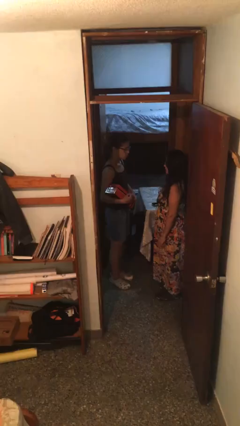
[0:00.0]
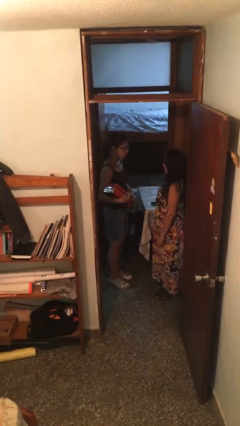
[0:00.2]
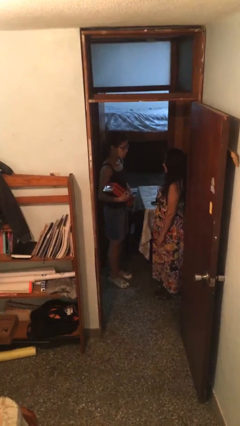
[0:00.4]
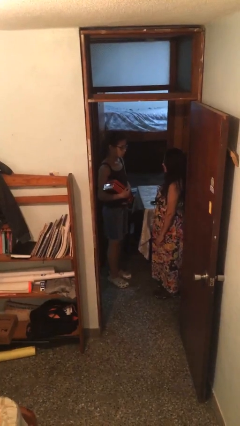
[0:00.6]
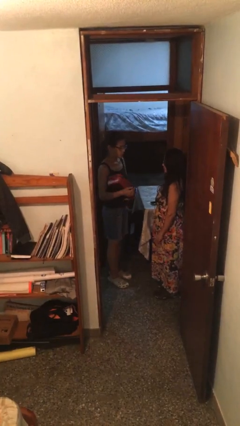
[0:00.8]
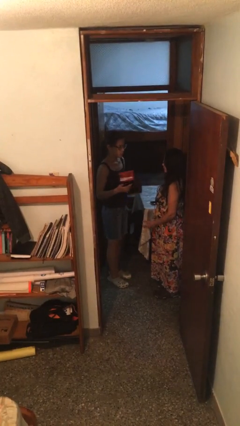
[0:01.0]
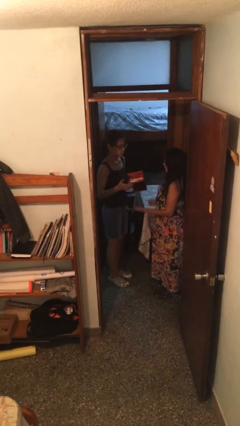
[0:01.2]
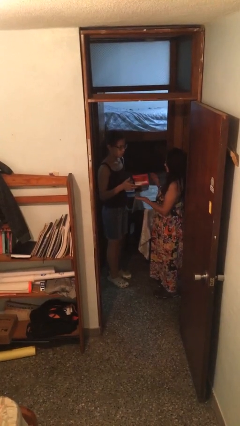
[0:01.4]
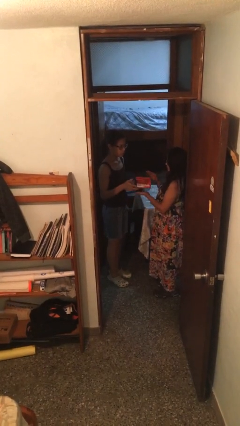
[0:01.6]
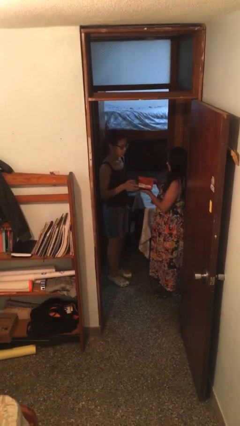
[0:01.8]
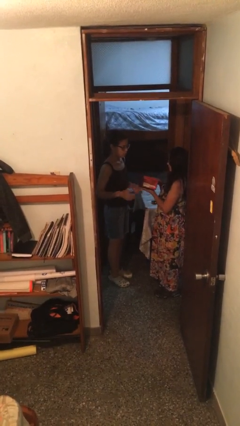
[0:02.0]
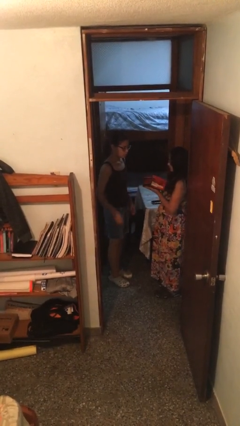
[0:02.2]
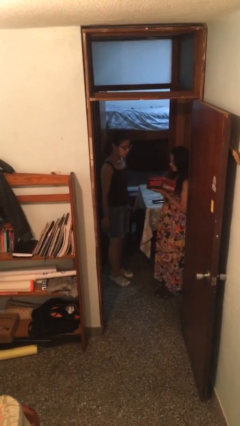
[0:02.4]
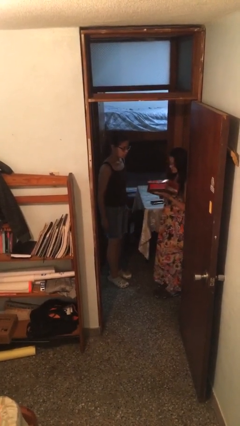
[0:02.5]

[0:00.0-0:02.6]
person transfers object to person

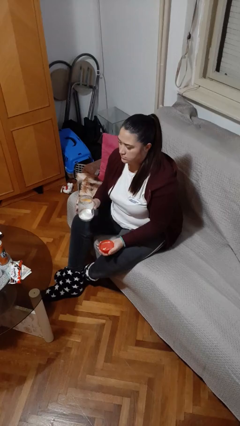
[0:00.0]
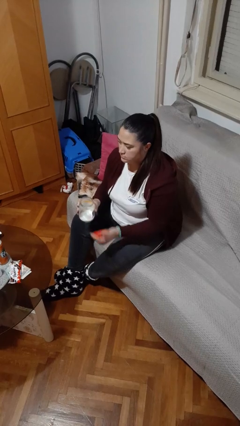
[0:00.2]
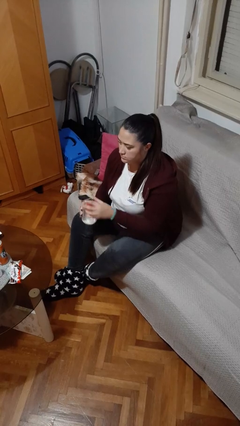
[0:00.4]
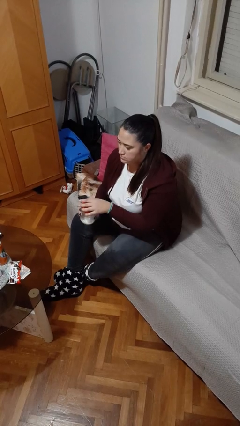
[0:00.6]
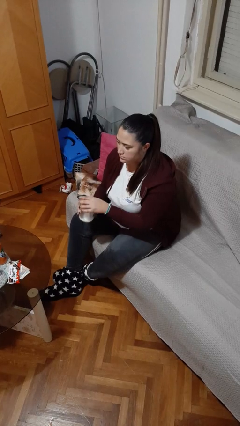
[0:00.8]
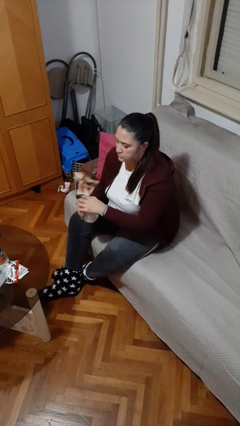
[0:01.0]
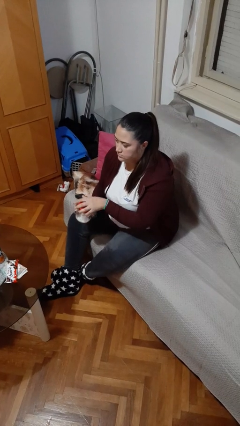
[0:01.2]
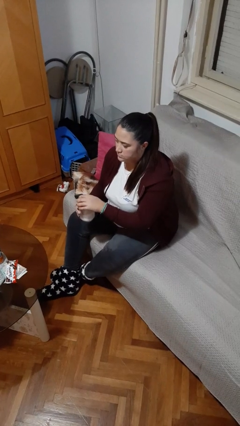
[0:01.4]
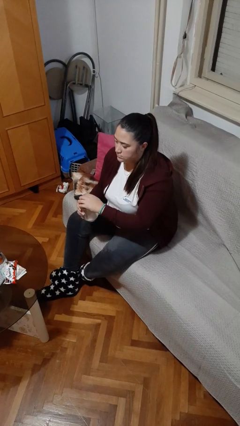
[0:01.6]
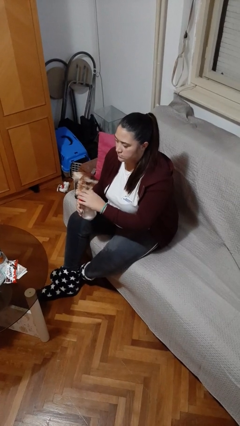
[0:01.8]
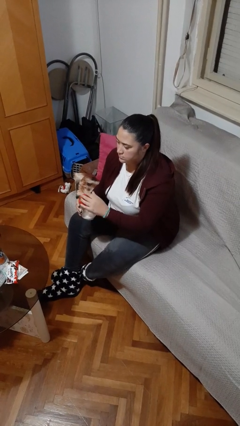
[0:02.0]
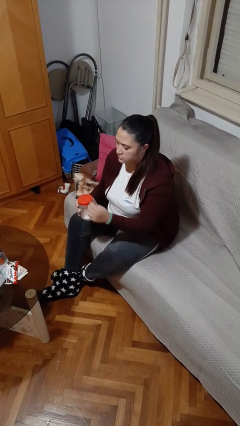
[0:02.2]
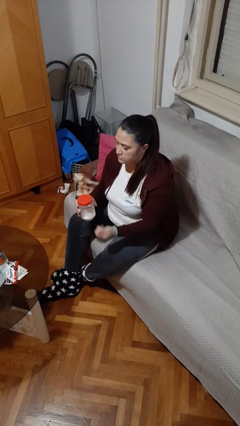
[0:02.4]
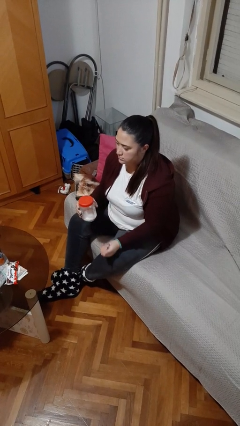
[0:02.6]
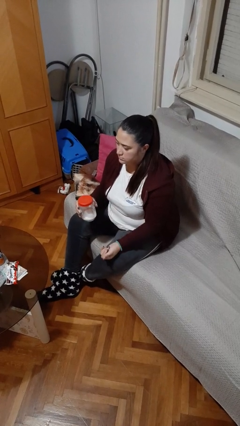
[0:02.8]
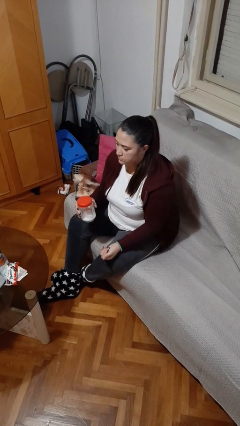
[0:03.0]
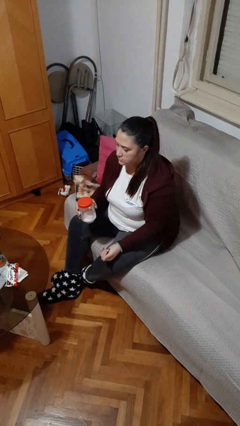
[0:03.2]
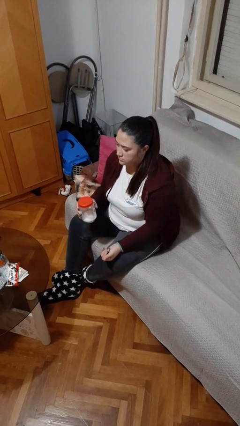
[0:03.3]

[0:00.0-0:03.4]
person closes jar

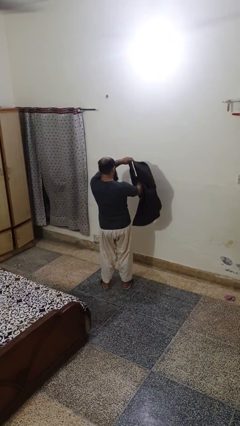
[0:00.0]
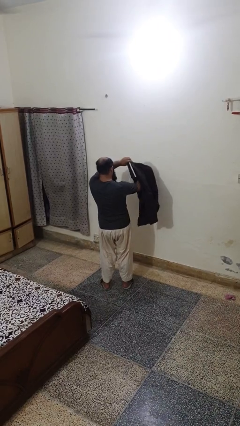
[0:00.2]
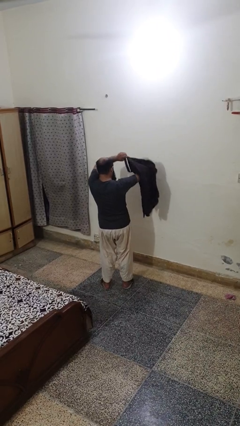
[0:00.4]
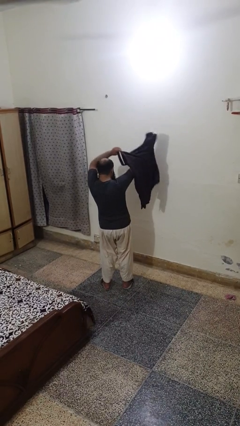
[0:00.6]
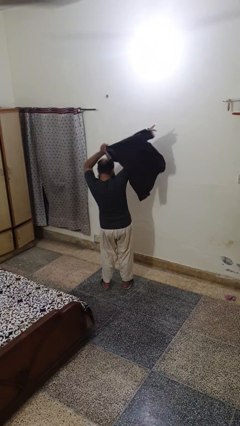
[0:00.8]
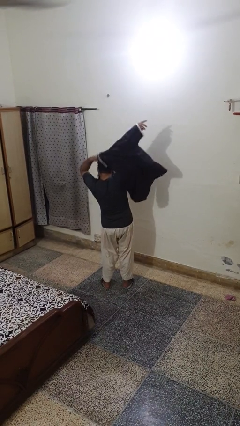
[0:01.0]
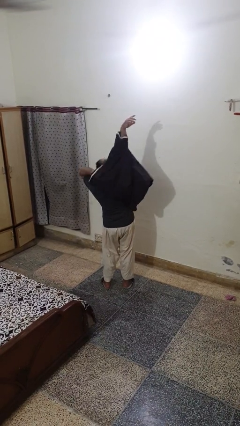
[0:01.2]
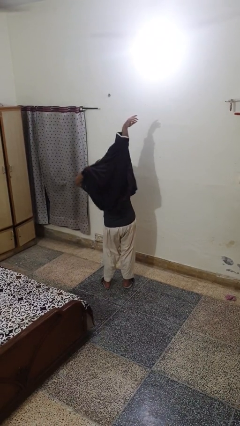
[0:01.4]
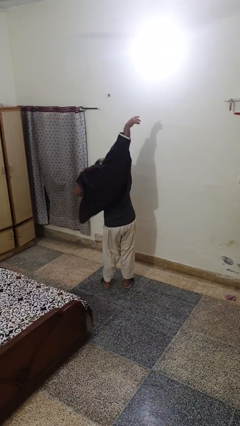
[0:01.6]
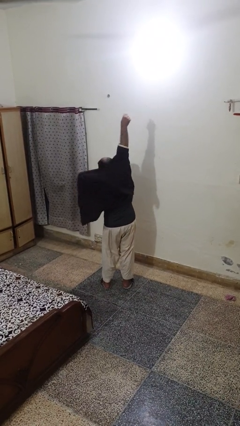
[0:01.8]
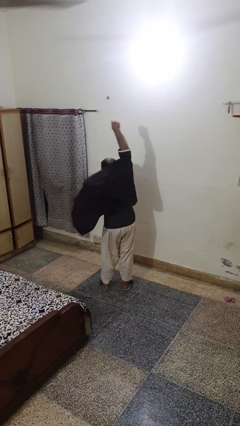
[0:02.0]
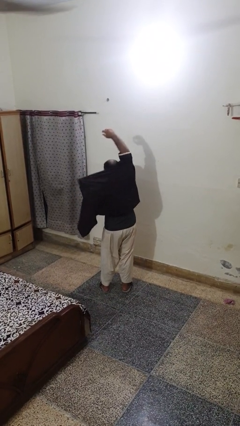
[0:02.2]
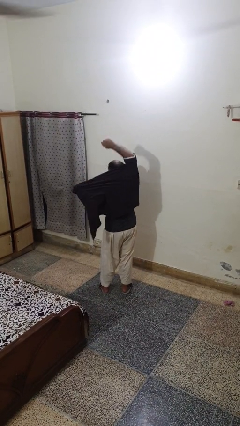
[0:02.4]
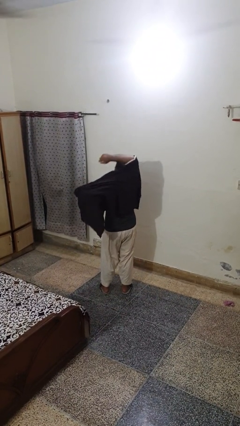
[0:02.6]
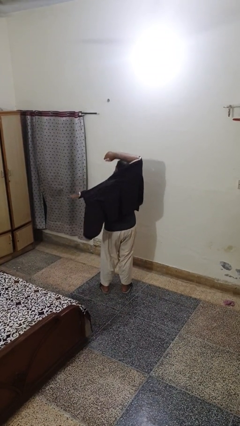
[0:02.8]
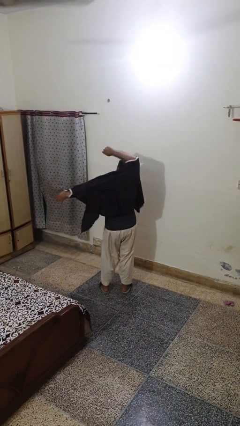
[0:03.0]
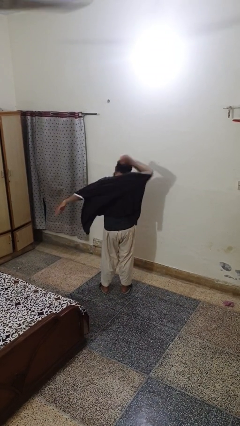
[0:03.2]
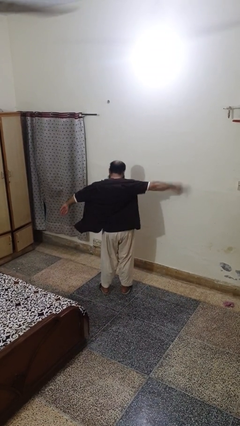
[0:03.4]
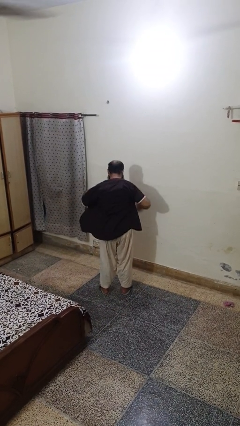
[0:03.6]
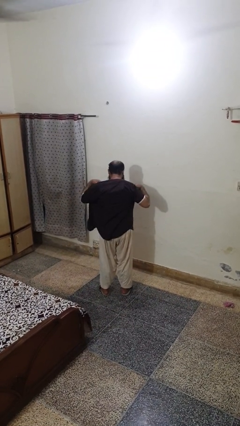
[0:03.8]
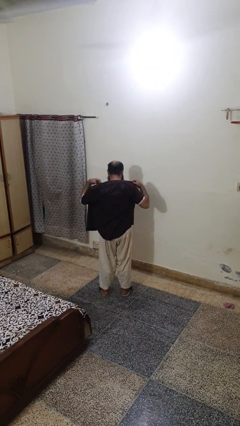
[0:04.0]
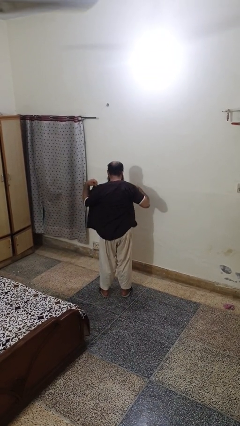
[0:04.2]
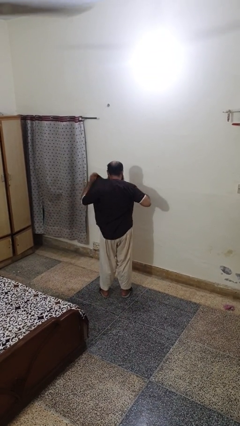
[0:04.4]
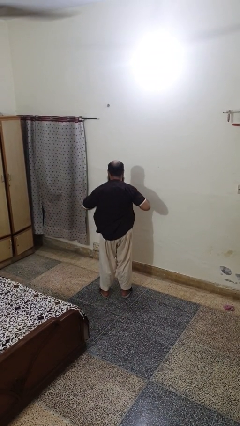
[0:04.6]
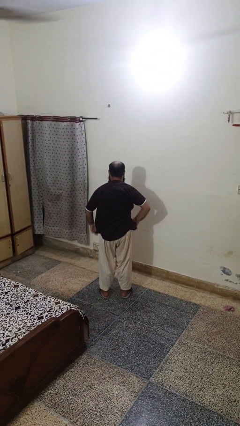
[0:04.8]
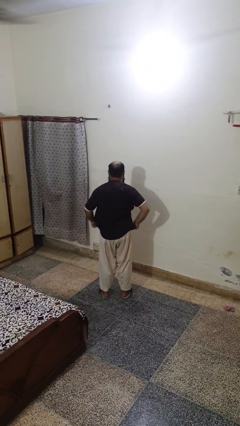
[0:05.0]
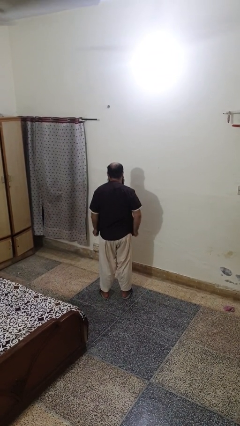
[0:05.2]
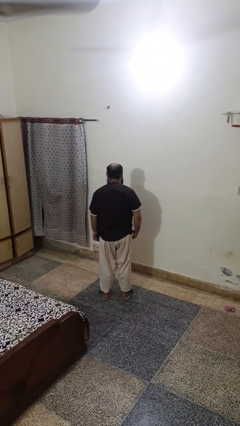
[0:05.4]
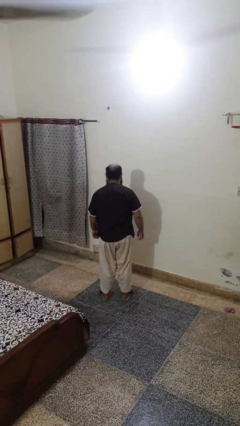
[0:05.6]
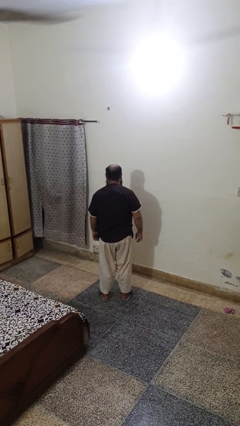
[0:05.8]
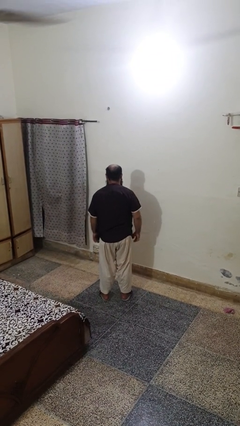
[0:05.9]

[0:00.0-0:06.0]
person puts on shirt

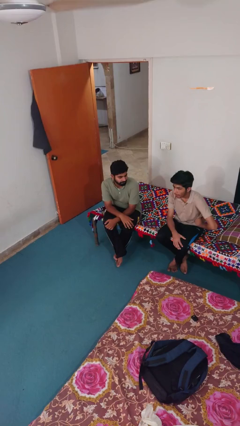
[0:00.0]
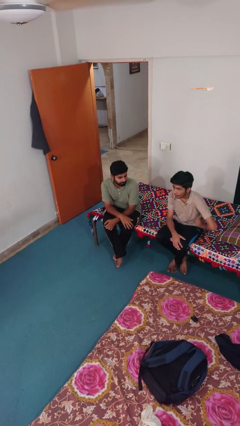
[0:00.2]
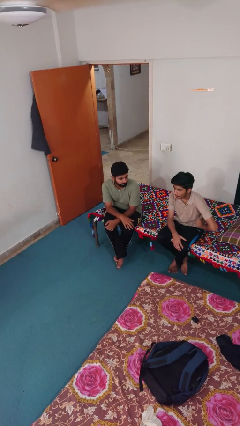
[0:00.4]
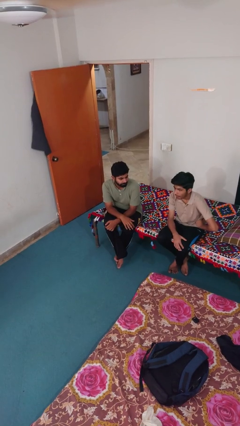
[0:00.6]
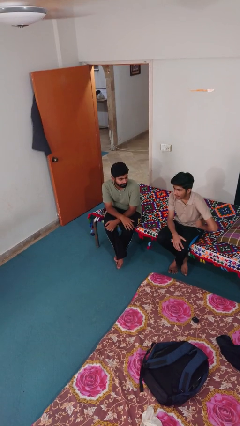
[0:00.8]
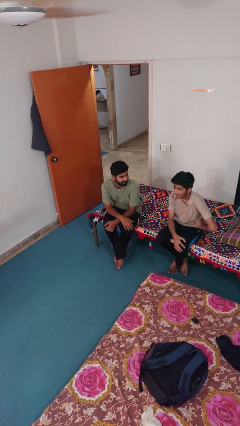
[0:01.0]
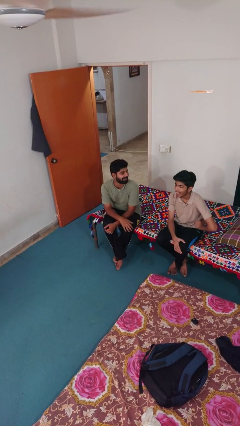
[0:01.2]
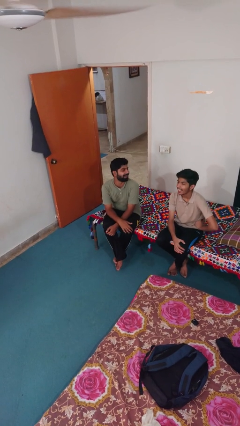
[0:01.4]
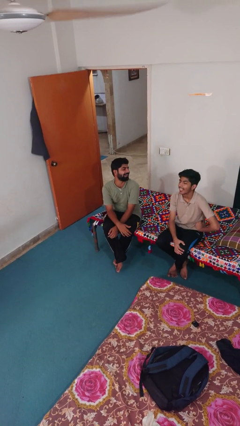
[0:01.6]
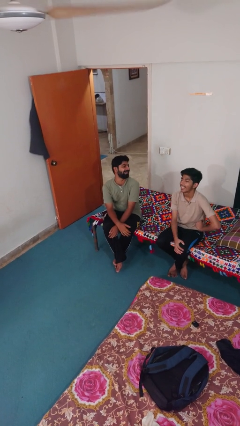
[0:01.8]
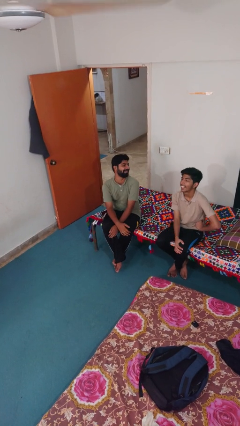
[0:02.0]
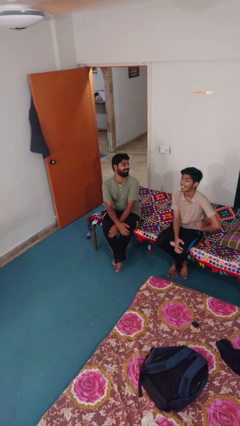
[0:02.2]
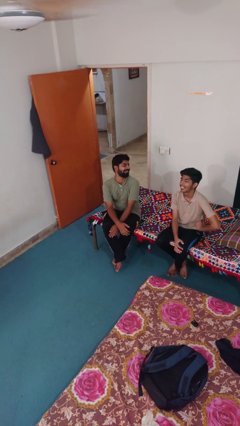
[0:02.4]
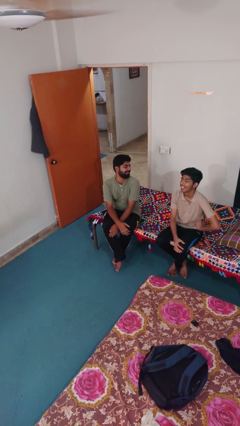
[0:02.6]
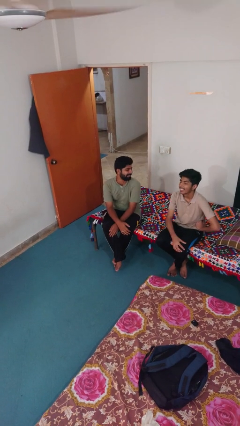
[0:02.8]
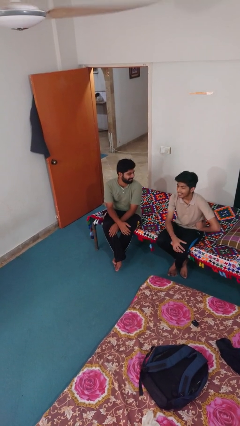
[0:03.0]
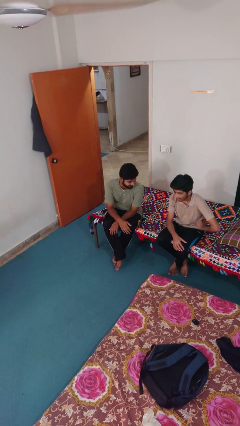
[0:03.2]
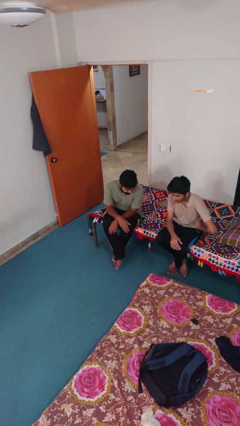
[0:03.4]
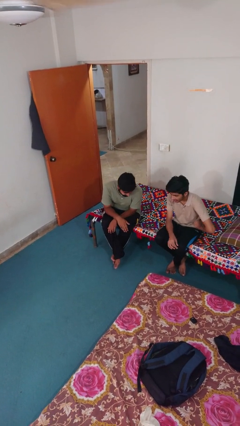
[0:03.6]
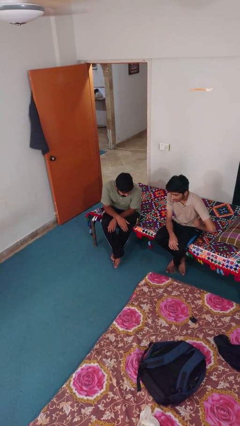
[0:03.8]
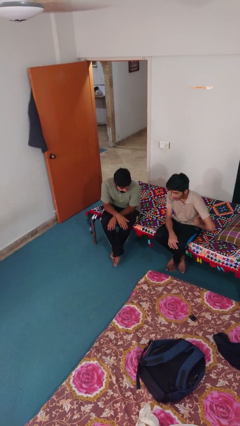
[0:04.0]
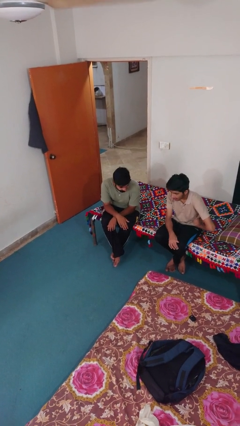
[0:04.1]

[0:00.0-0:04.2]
person laughs with person

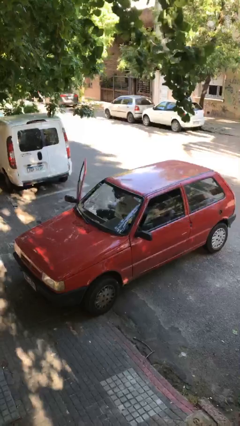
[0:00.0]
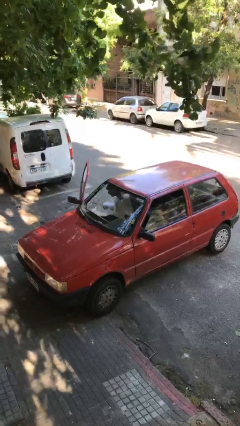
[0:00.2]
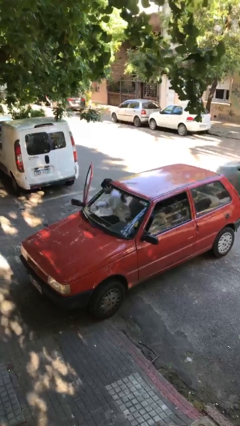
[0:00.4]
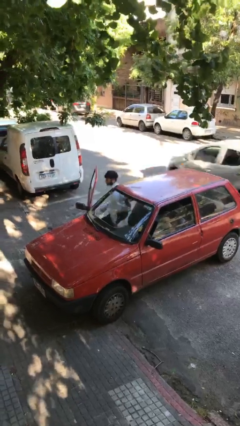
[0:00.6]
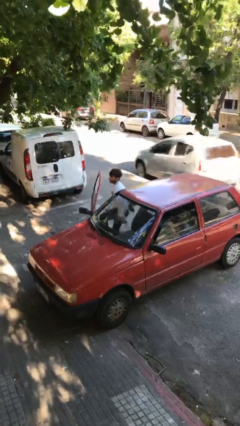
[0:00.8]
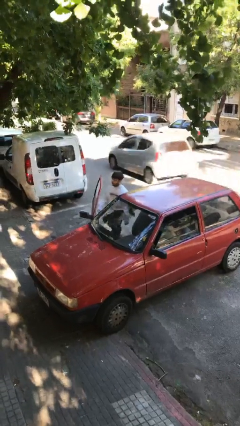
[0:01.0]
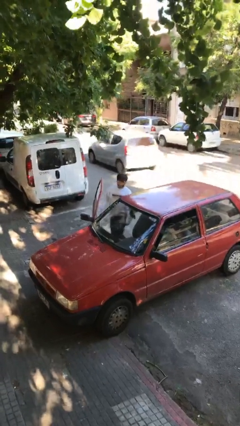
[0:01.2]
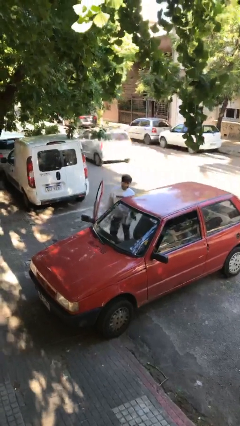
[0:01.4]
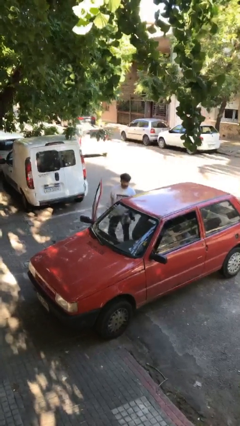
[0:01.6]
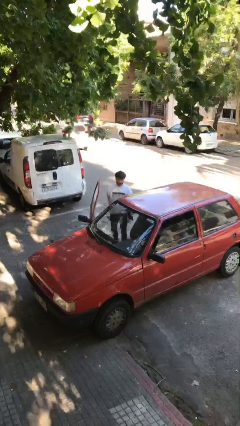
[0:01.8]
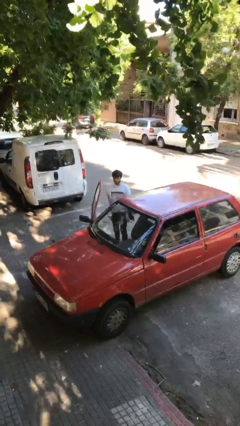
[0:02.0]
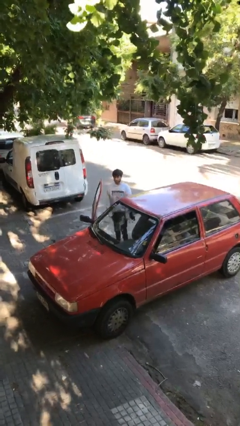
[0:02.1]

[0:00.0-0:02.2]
person exits car
